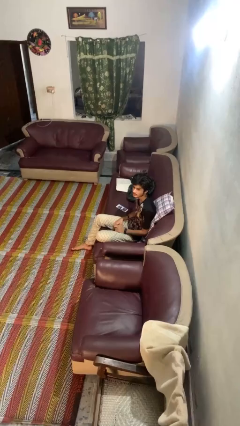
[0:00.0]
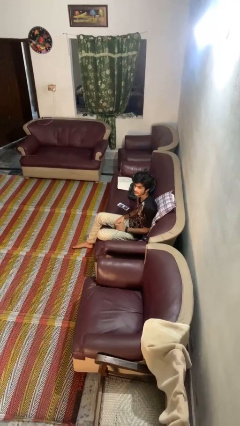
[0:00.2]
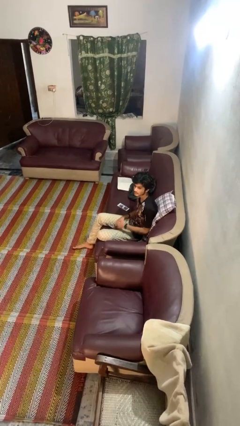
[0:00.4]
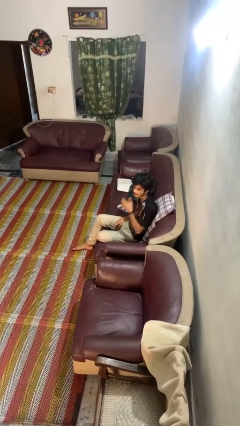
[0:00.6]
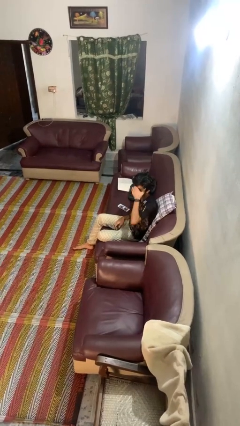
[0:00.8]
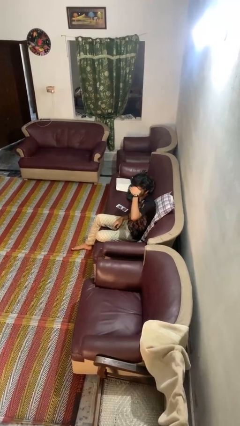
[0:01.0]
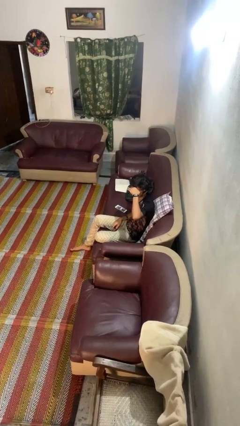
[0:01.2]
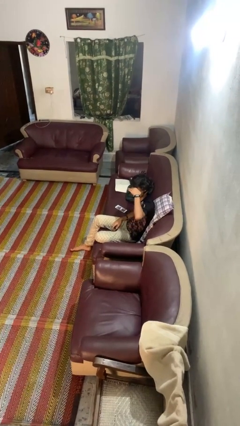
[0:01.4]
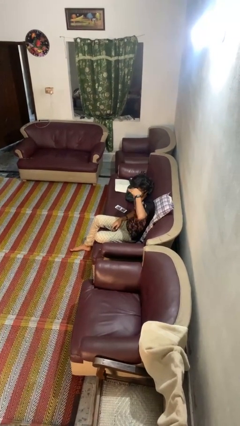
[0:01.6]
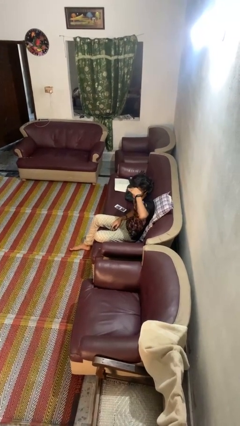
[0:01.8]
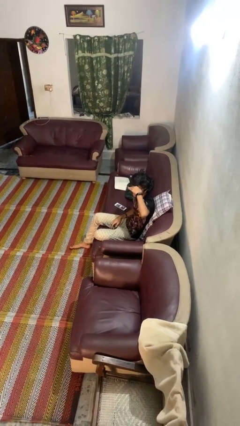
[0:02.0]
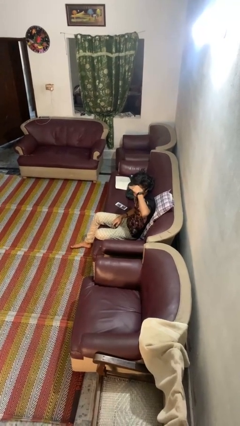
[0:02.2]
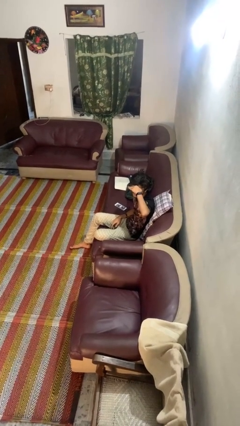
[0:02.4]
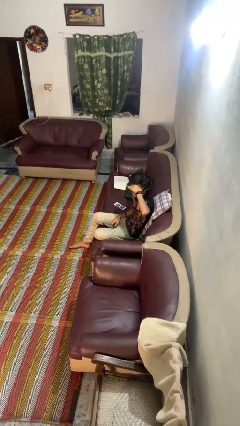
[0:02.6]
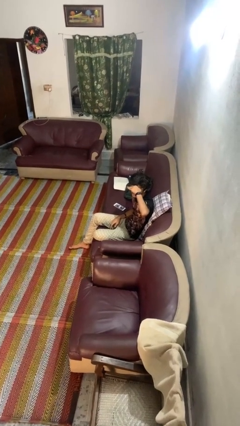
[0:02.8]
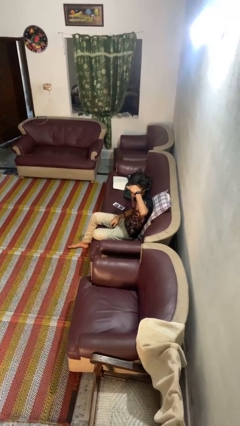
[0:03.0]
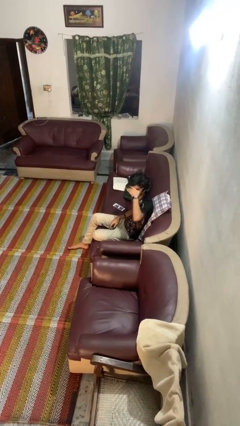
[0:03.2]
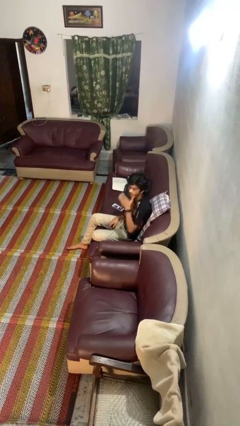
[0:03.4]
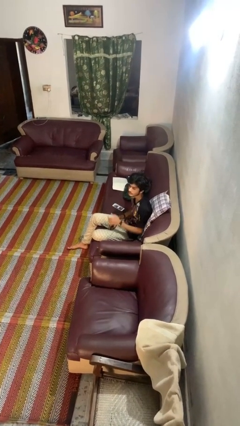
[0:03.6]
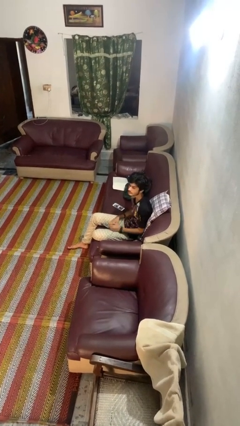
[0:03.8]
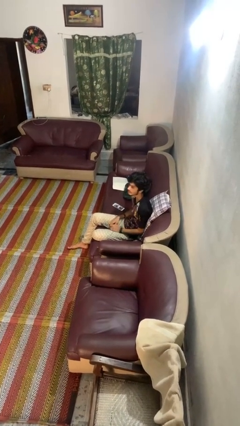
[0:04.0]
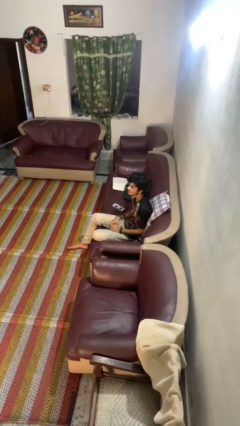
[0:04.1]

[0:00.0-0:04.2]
person shades eyes

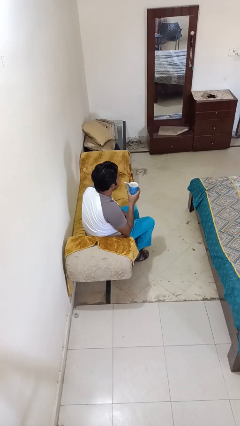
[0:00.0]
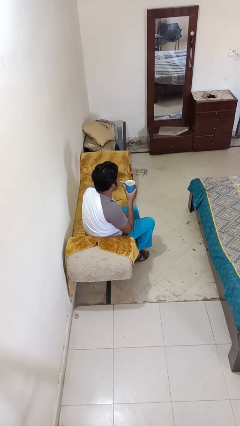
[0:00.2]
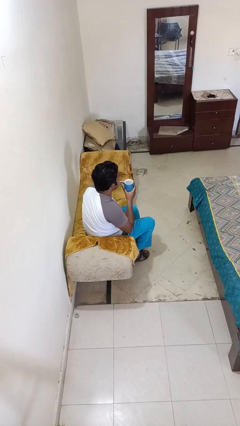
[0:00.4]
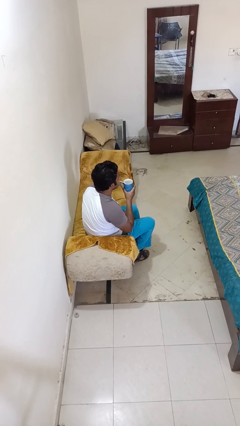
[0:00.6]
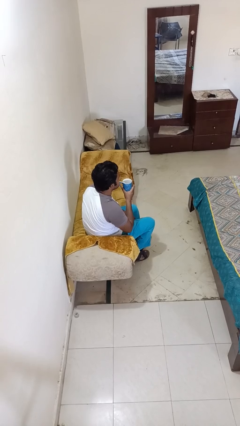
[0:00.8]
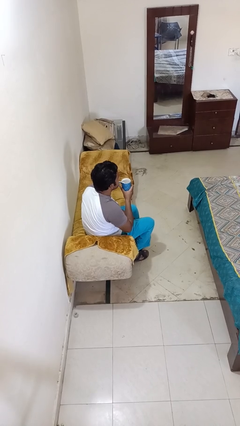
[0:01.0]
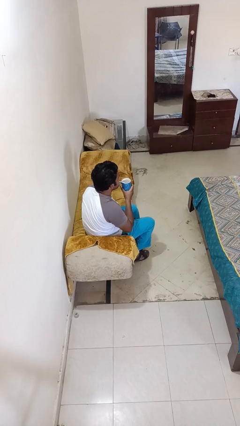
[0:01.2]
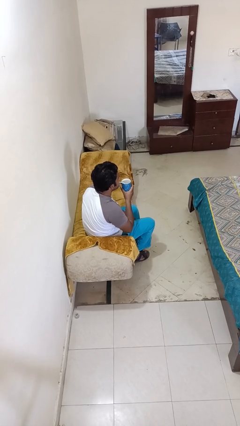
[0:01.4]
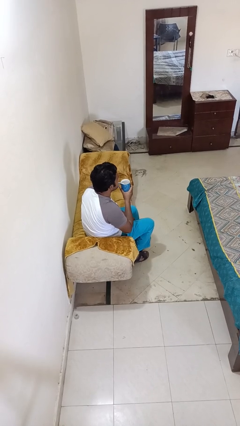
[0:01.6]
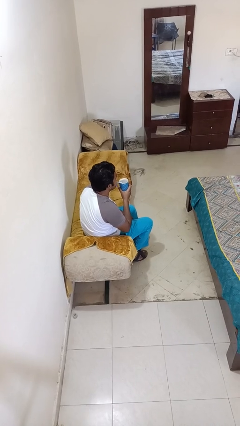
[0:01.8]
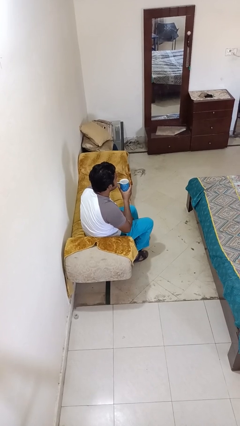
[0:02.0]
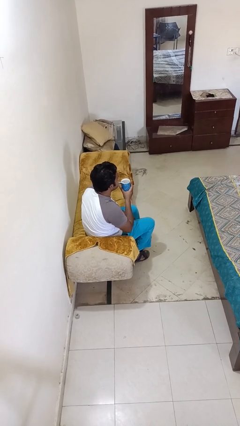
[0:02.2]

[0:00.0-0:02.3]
person drinks from straw

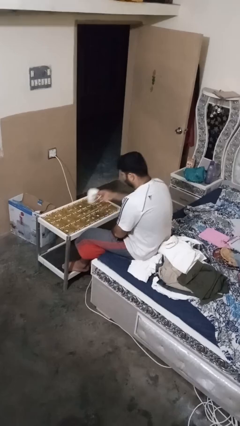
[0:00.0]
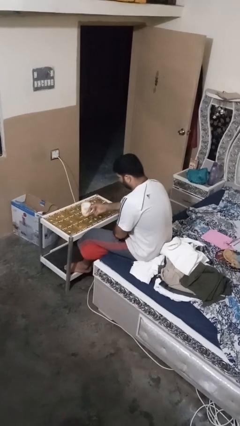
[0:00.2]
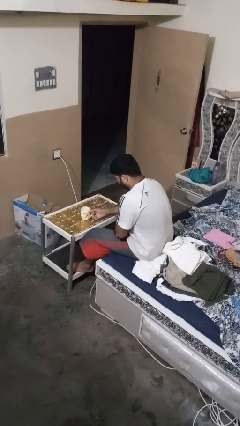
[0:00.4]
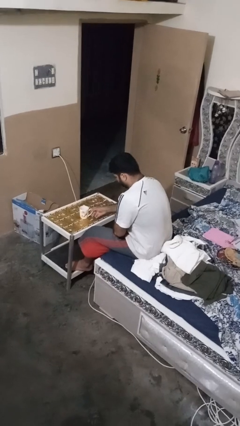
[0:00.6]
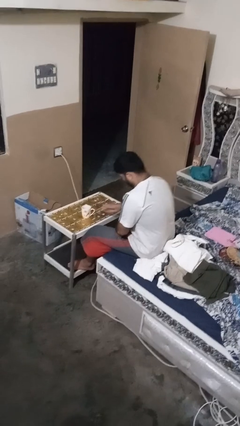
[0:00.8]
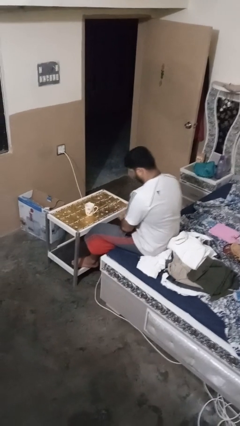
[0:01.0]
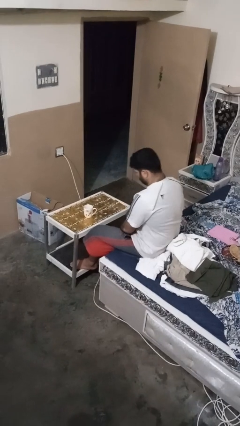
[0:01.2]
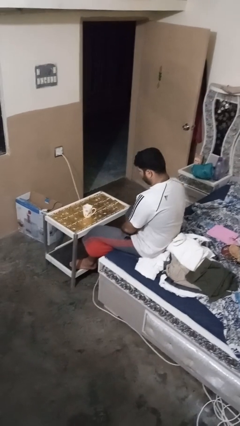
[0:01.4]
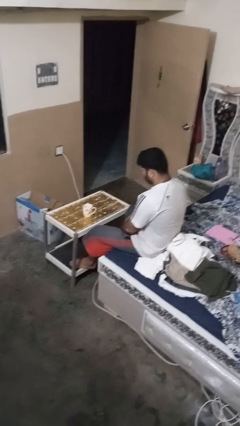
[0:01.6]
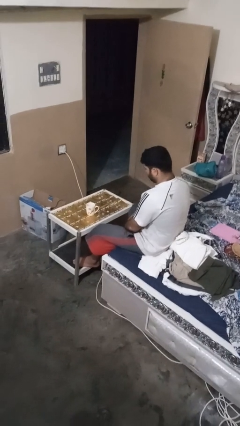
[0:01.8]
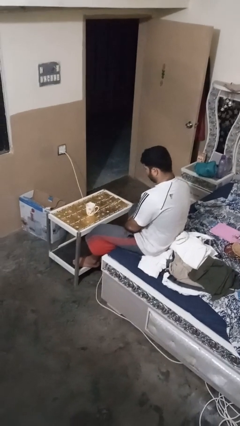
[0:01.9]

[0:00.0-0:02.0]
person puts down object on table

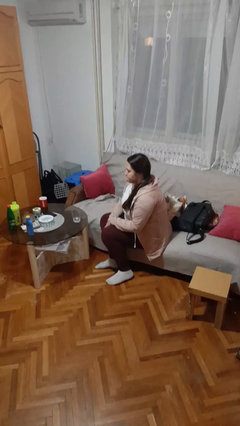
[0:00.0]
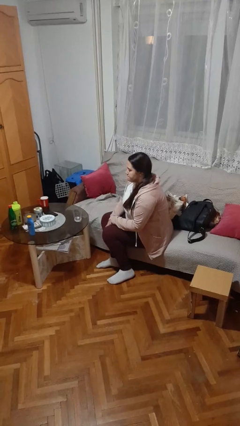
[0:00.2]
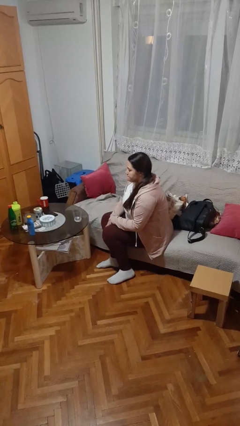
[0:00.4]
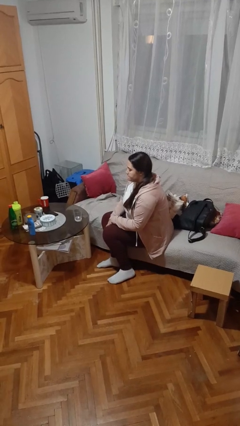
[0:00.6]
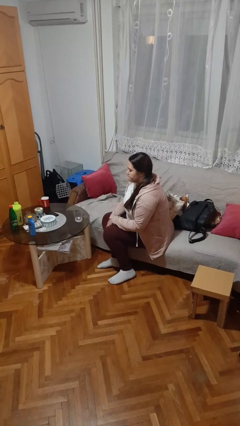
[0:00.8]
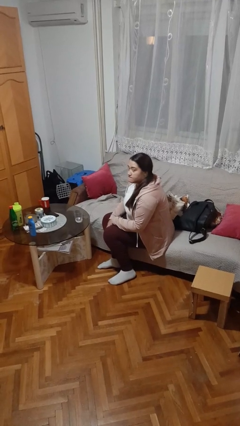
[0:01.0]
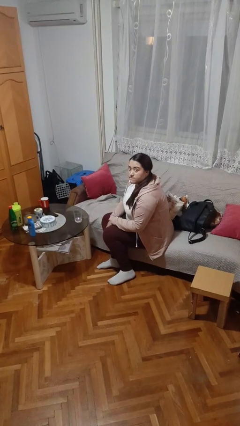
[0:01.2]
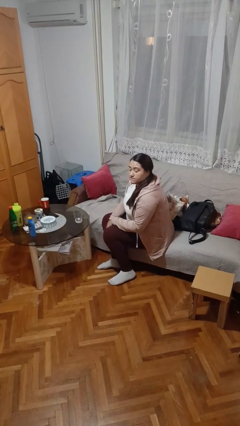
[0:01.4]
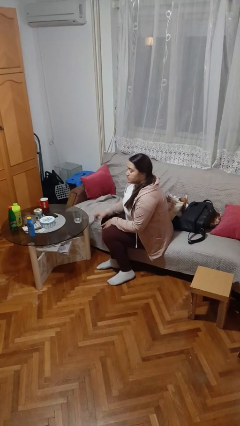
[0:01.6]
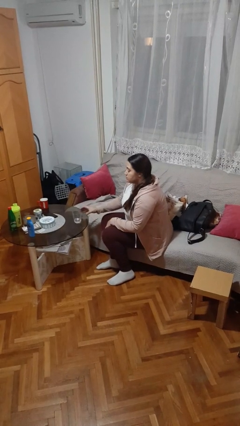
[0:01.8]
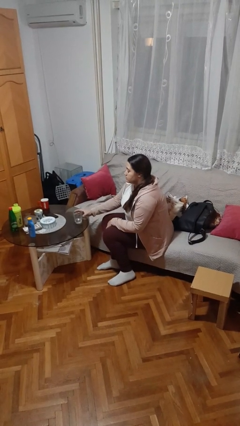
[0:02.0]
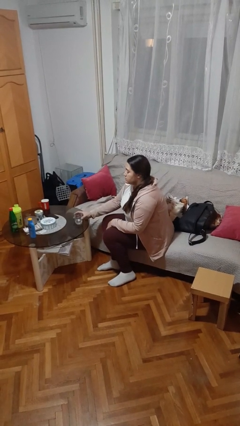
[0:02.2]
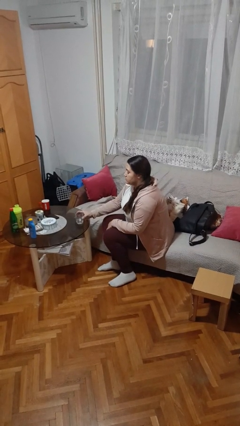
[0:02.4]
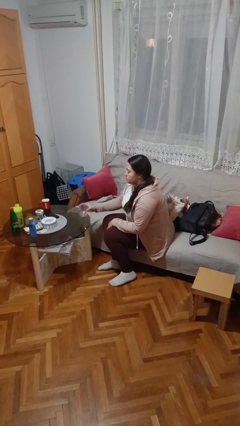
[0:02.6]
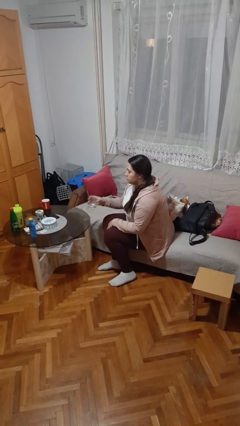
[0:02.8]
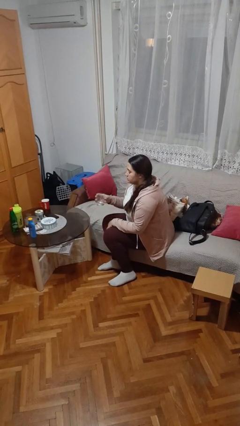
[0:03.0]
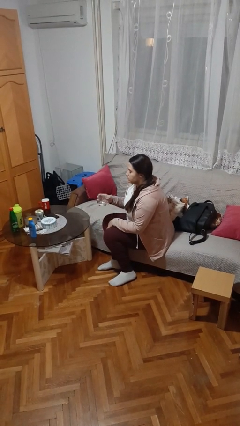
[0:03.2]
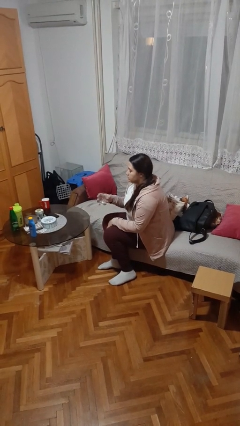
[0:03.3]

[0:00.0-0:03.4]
person picks up object from table

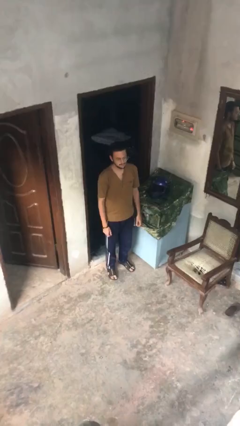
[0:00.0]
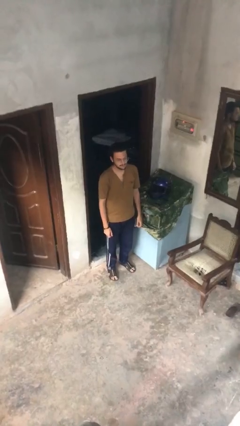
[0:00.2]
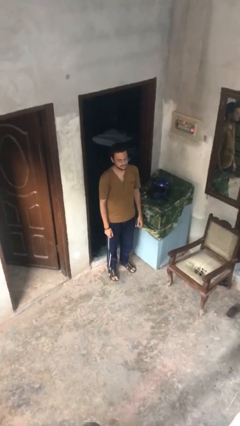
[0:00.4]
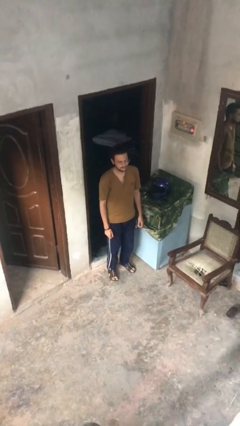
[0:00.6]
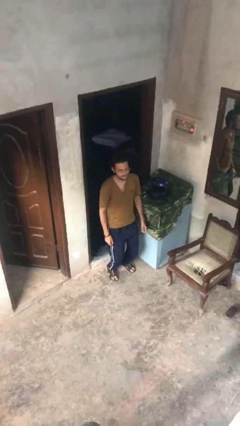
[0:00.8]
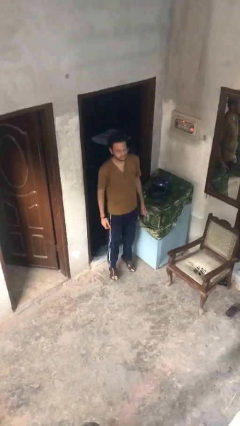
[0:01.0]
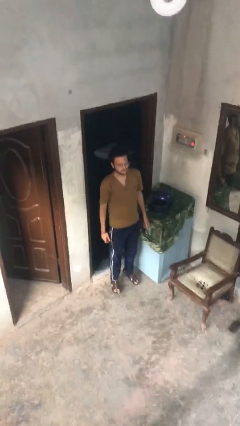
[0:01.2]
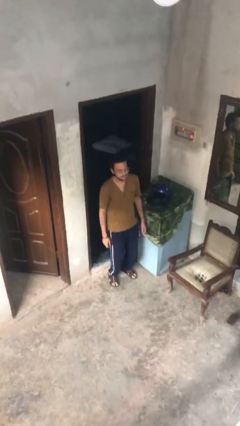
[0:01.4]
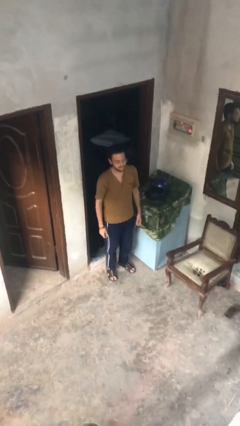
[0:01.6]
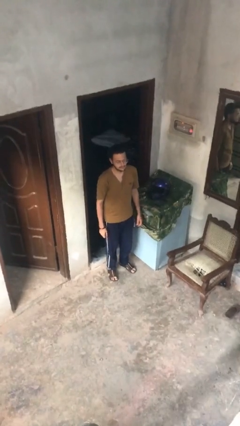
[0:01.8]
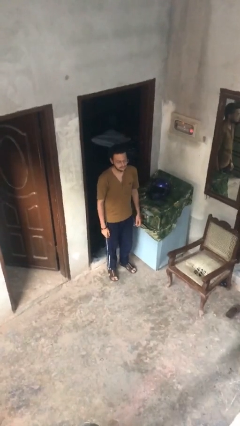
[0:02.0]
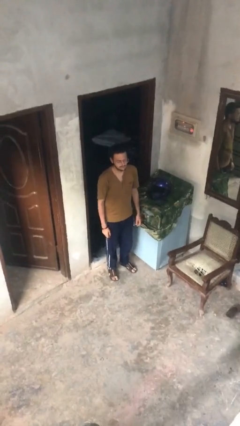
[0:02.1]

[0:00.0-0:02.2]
person jumps

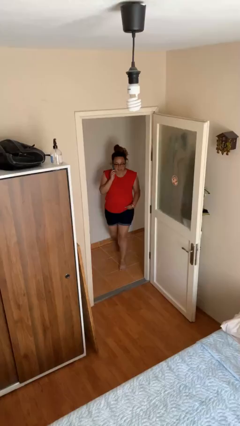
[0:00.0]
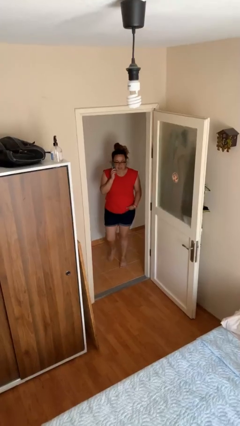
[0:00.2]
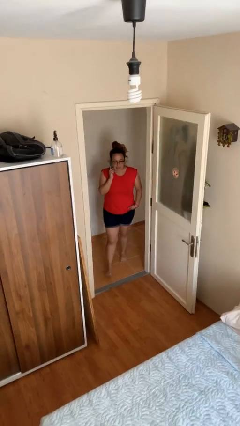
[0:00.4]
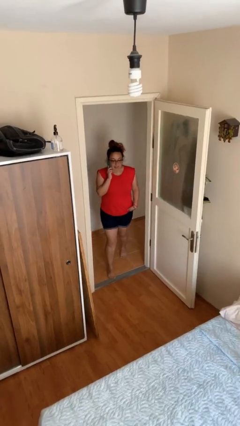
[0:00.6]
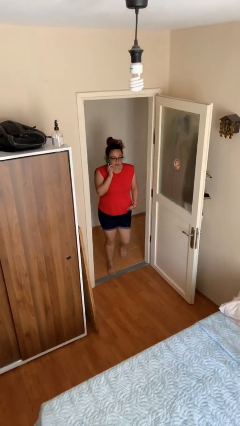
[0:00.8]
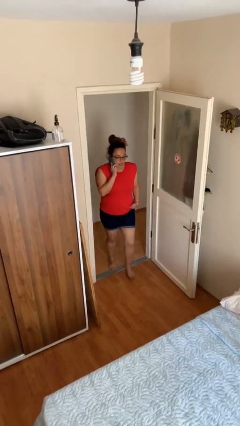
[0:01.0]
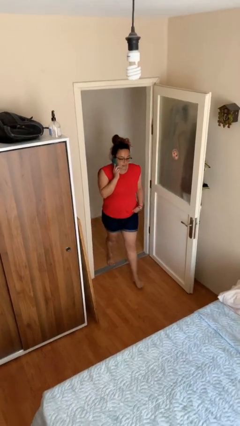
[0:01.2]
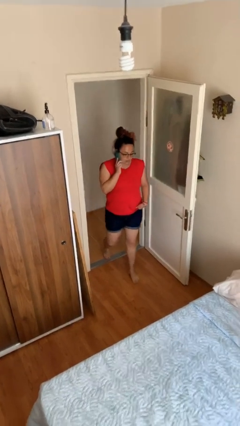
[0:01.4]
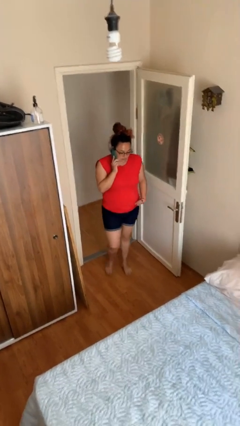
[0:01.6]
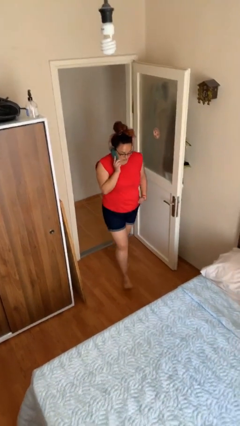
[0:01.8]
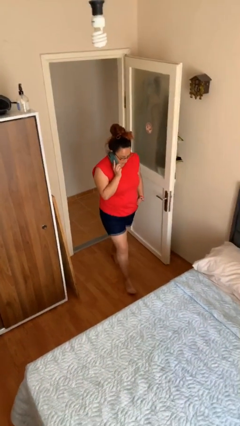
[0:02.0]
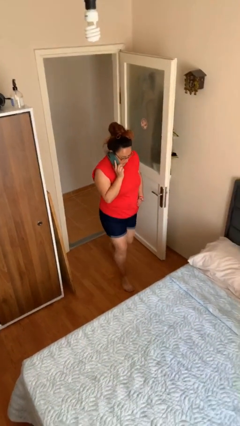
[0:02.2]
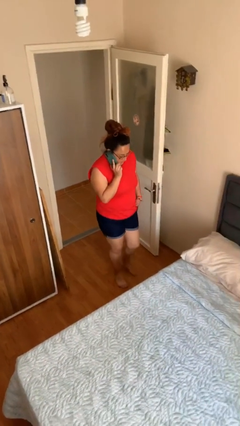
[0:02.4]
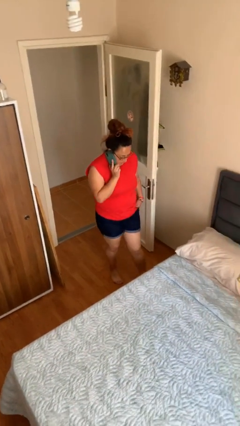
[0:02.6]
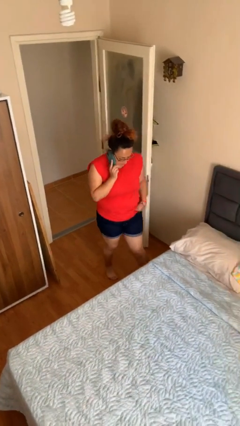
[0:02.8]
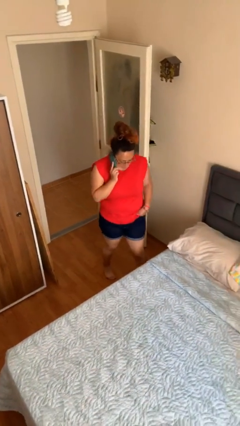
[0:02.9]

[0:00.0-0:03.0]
person enters scene through structure

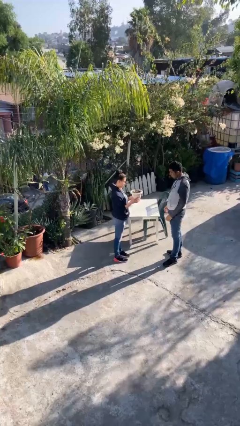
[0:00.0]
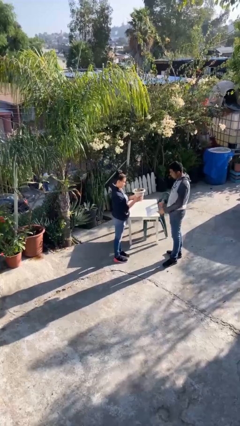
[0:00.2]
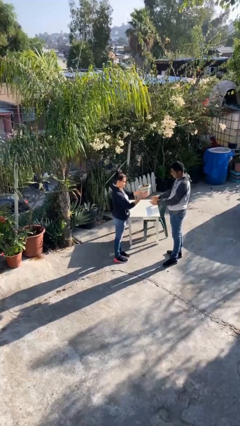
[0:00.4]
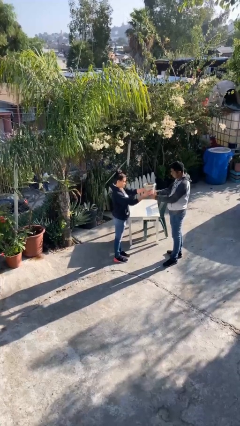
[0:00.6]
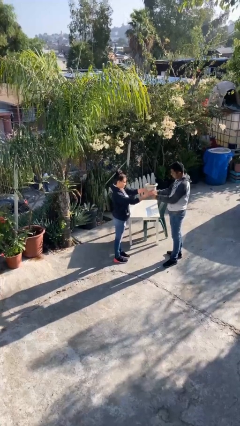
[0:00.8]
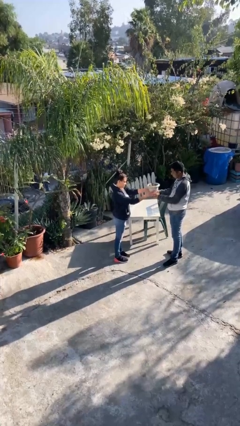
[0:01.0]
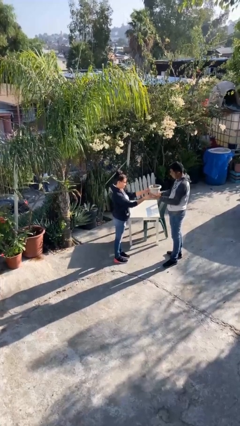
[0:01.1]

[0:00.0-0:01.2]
person transfers object to person
